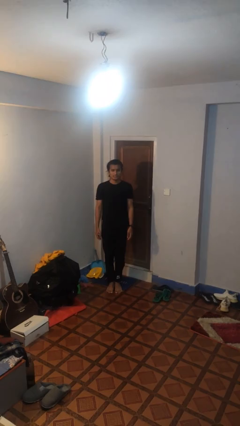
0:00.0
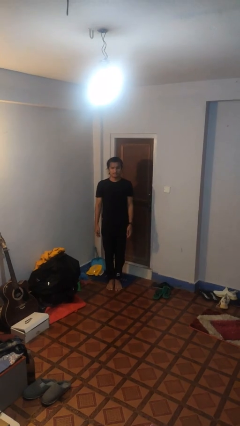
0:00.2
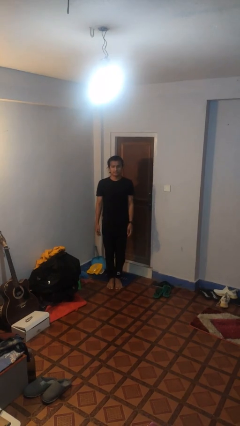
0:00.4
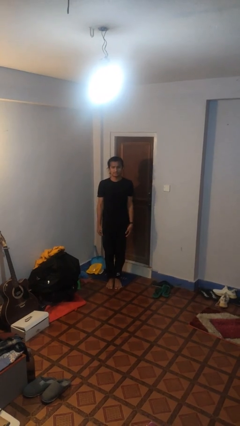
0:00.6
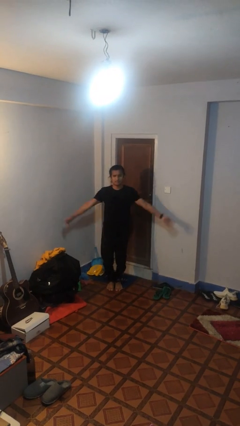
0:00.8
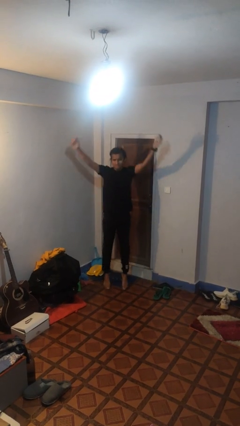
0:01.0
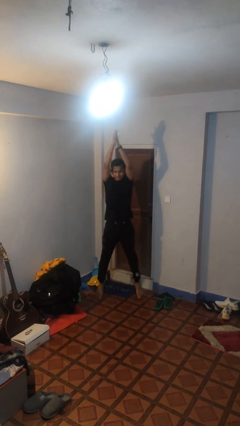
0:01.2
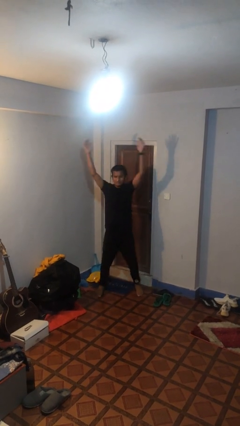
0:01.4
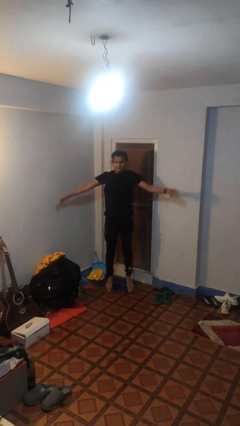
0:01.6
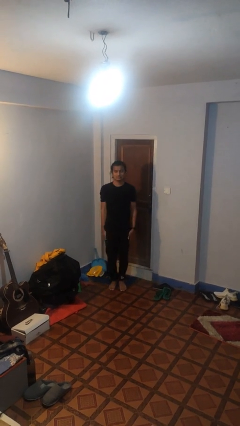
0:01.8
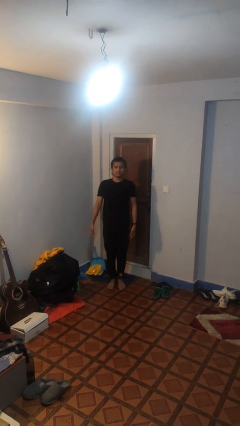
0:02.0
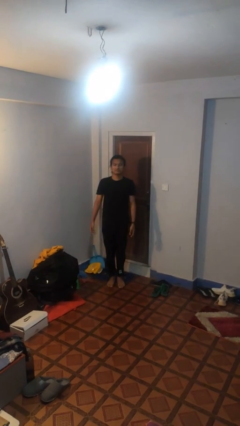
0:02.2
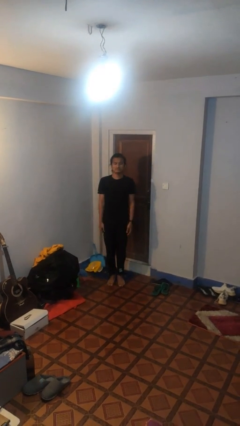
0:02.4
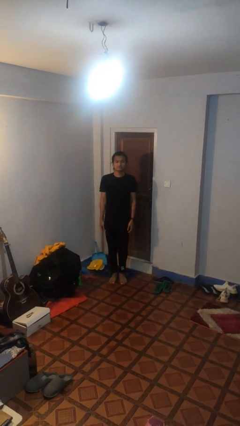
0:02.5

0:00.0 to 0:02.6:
person exercises with jumping jacks

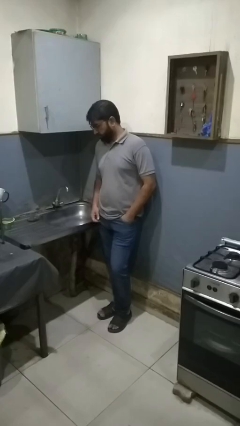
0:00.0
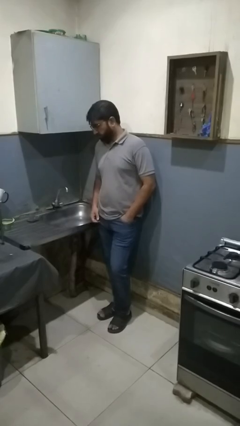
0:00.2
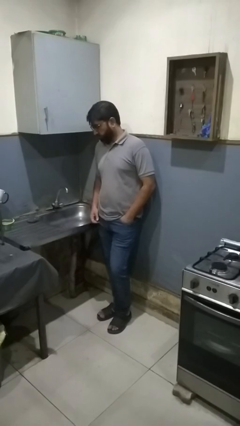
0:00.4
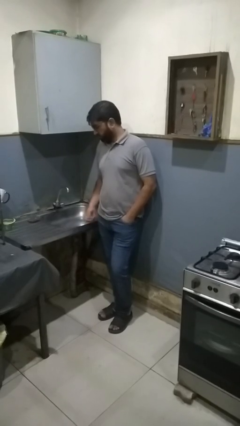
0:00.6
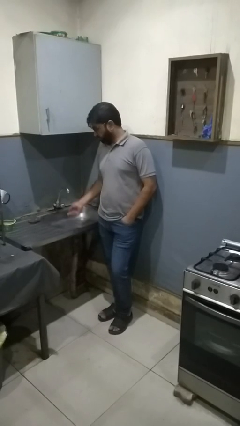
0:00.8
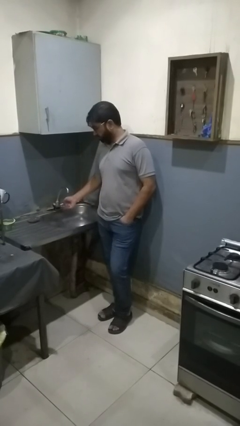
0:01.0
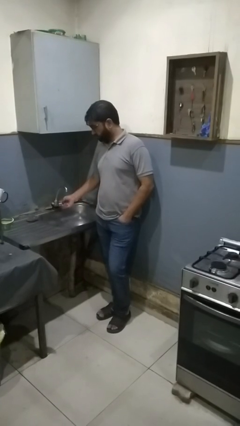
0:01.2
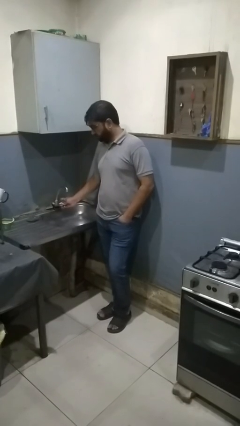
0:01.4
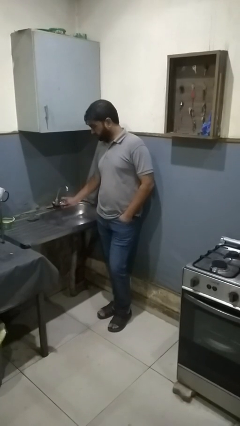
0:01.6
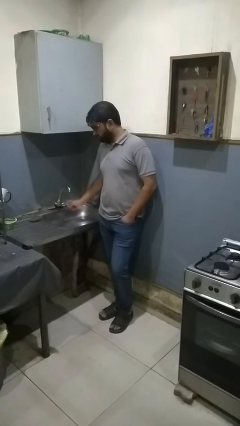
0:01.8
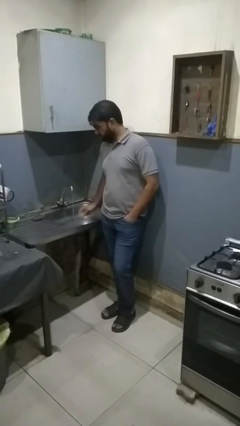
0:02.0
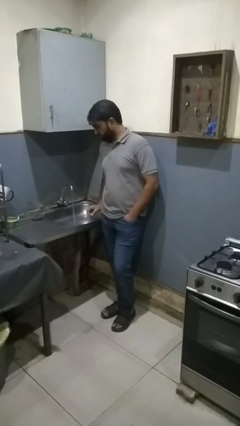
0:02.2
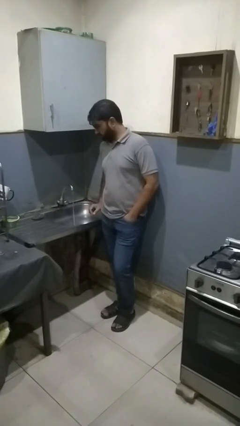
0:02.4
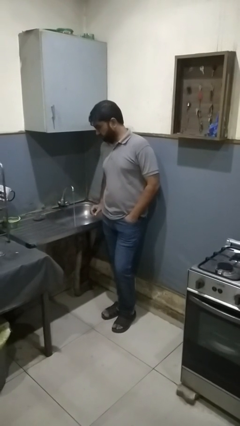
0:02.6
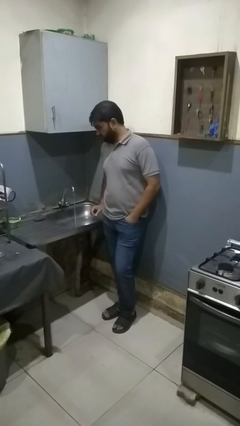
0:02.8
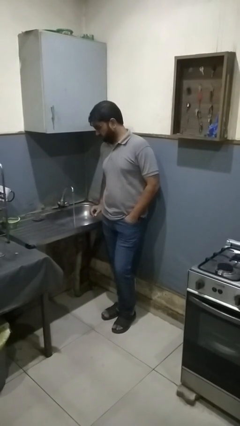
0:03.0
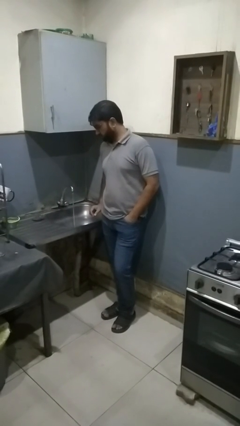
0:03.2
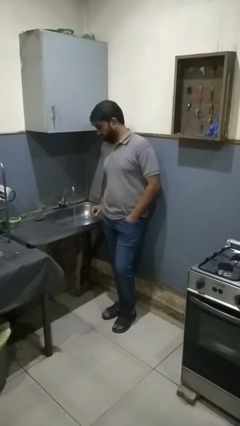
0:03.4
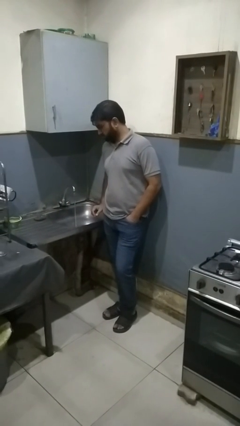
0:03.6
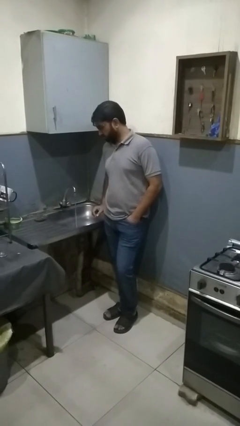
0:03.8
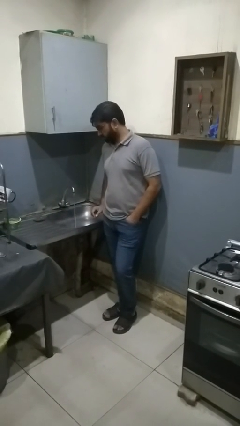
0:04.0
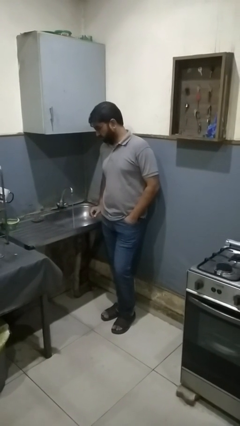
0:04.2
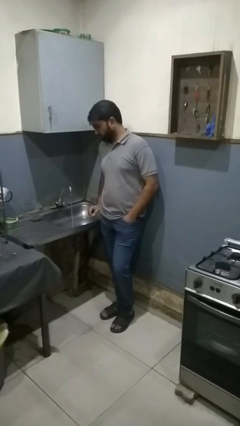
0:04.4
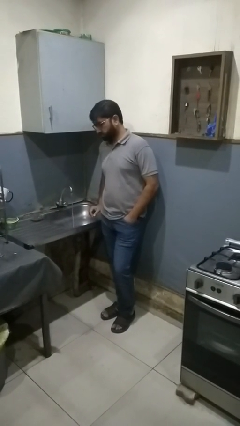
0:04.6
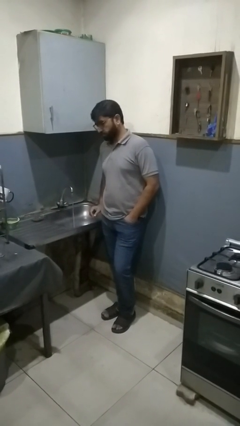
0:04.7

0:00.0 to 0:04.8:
person turns on faucet

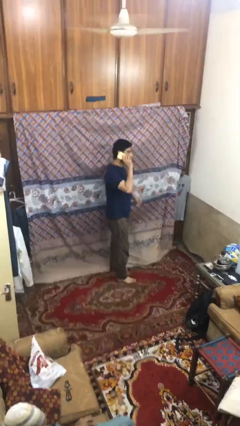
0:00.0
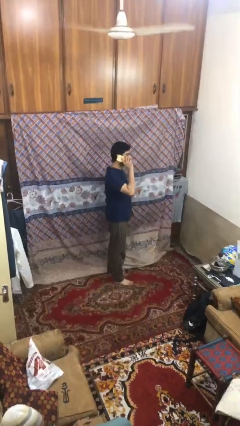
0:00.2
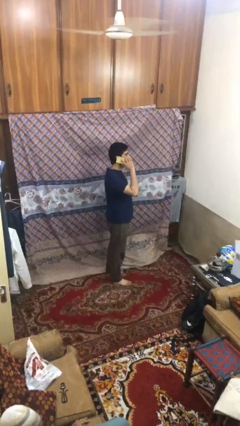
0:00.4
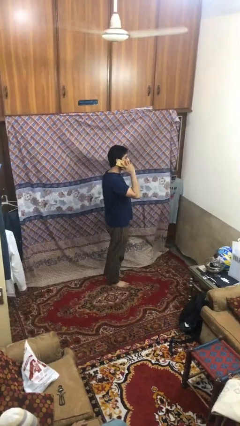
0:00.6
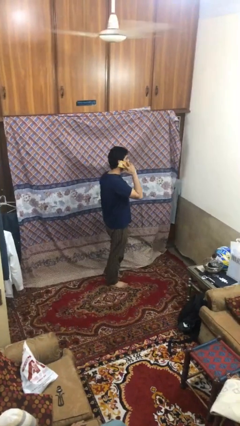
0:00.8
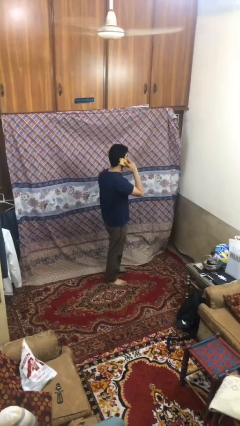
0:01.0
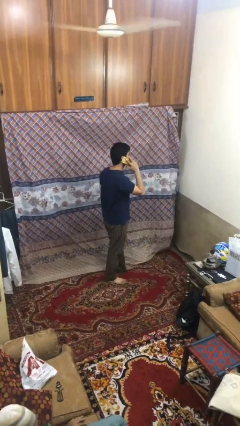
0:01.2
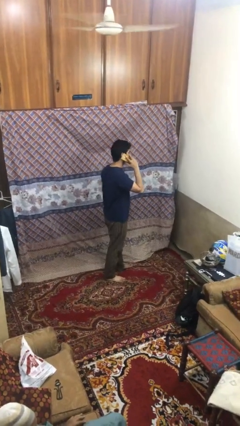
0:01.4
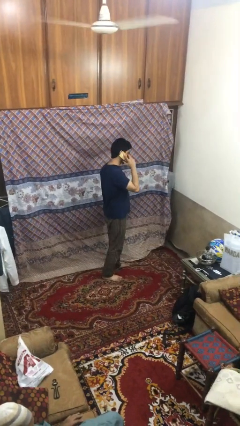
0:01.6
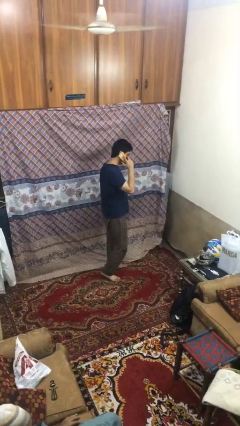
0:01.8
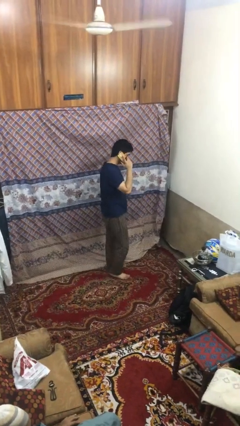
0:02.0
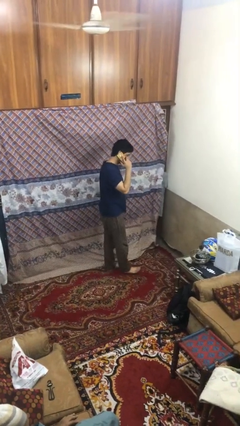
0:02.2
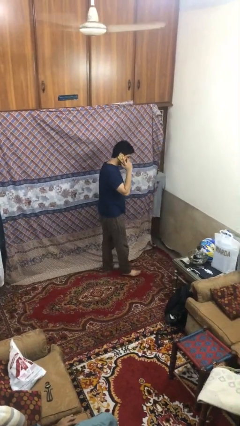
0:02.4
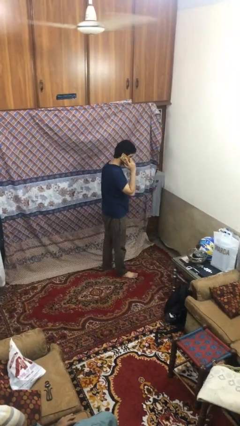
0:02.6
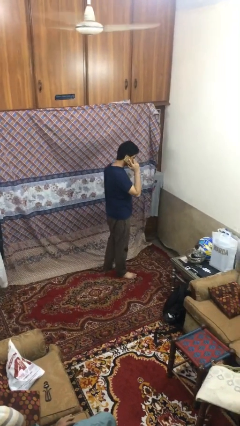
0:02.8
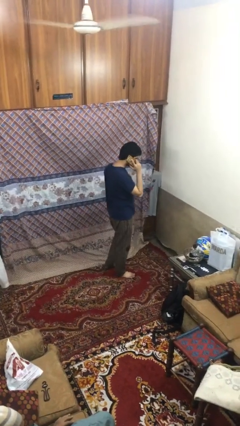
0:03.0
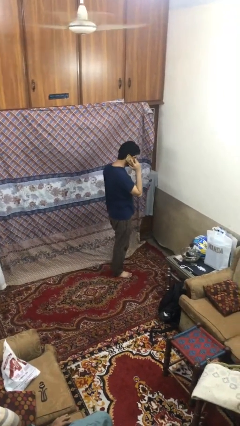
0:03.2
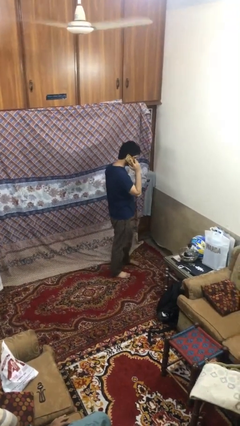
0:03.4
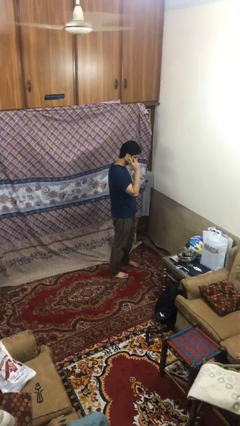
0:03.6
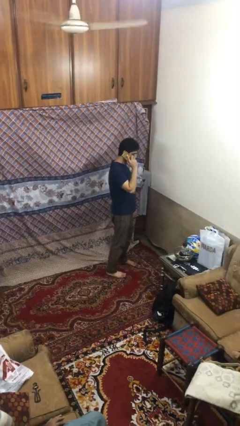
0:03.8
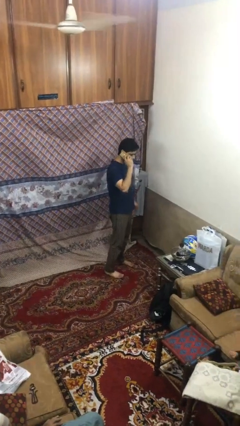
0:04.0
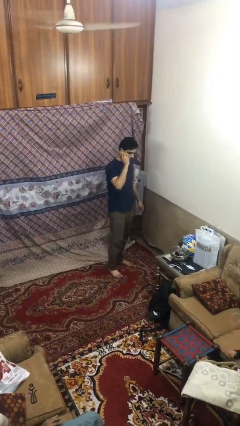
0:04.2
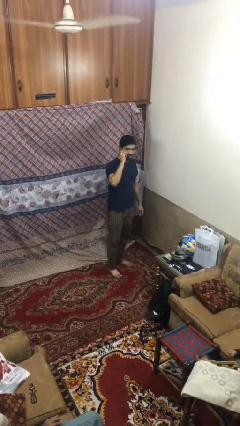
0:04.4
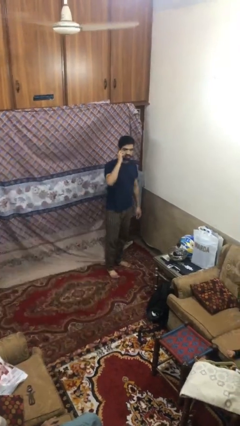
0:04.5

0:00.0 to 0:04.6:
person talks on phone

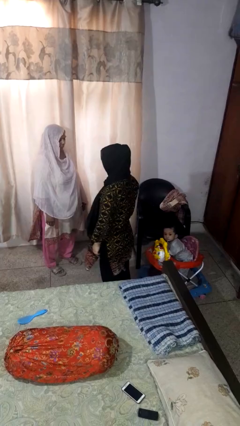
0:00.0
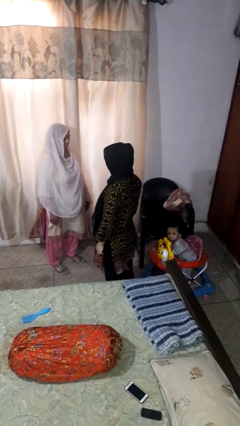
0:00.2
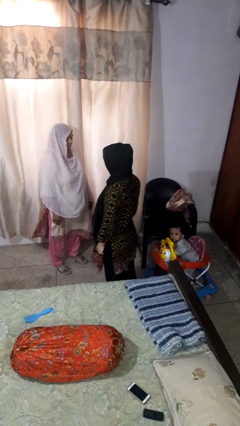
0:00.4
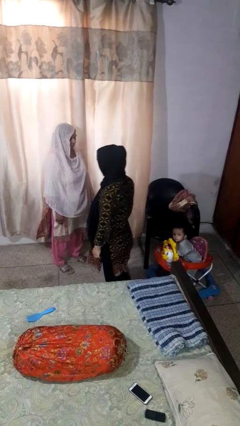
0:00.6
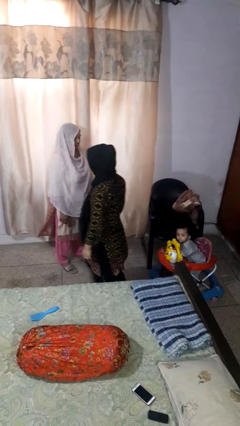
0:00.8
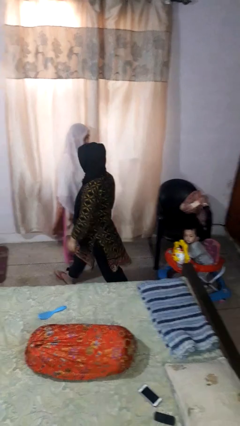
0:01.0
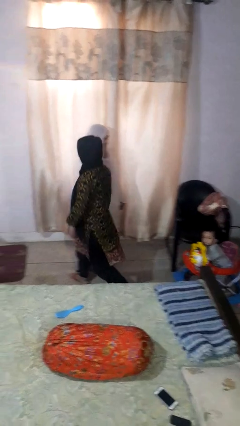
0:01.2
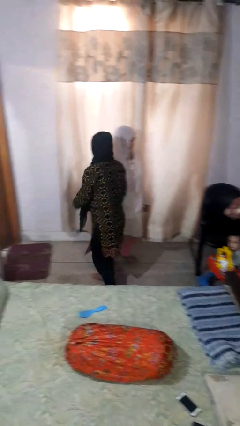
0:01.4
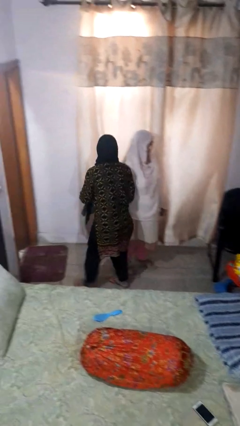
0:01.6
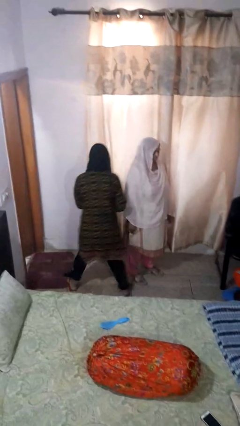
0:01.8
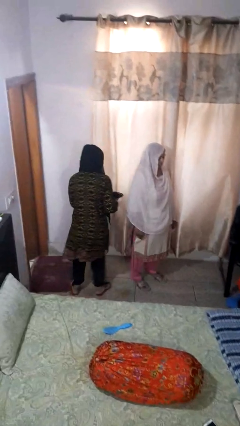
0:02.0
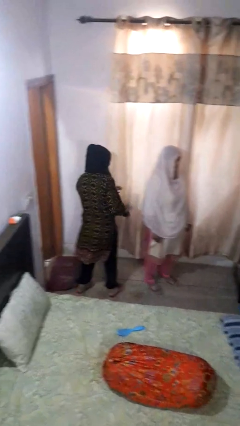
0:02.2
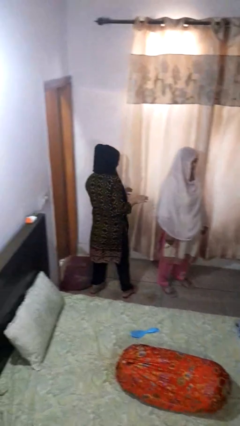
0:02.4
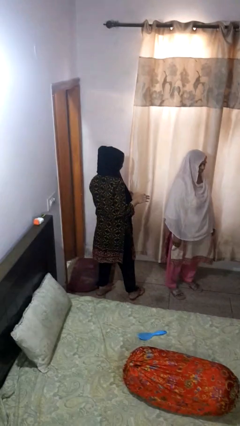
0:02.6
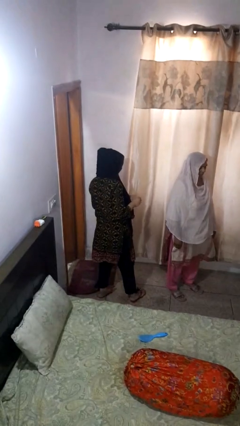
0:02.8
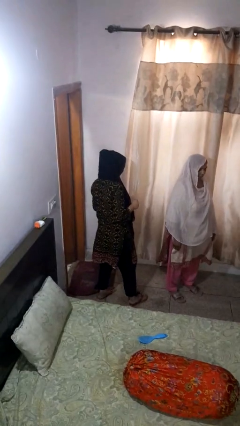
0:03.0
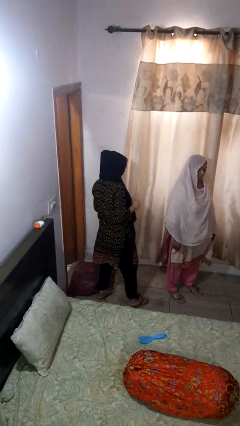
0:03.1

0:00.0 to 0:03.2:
person bumps into person

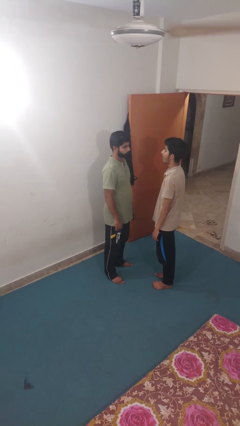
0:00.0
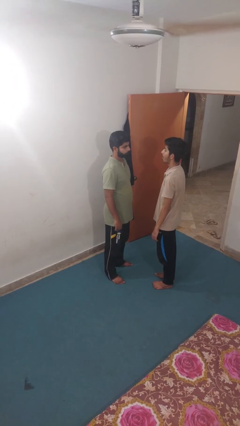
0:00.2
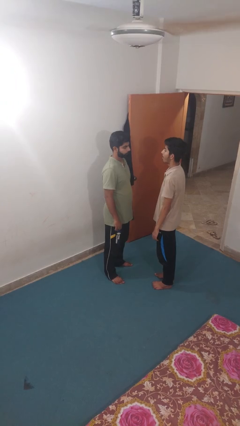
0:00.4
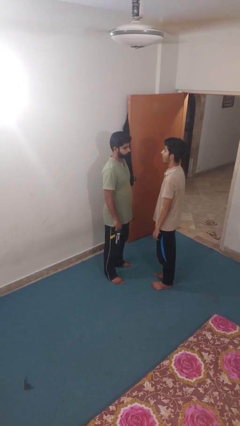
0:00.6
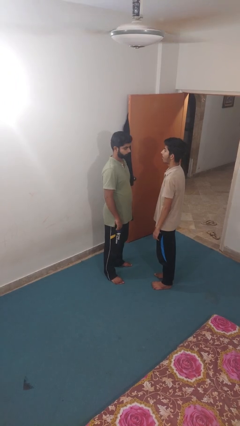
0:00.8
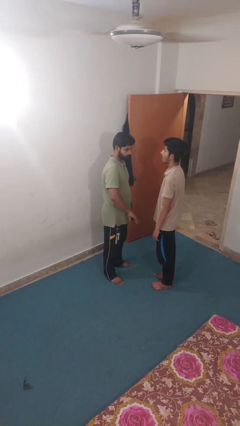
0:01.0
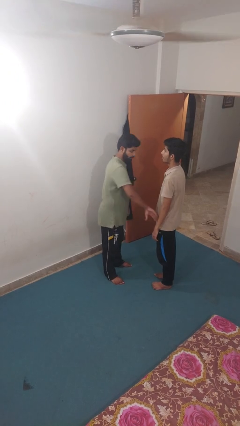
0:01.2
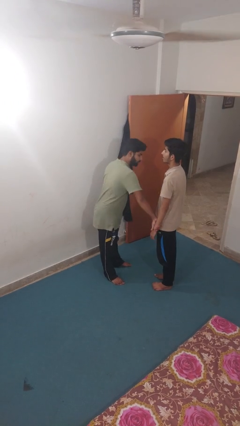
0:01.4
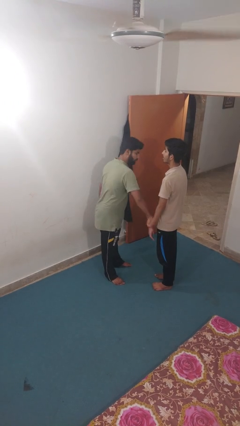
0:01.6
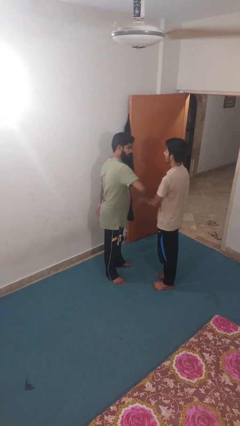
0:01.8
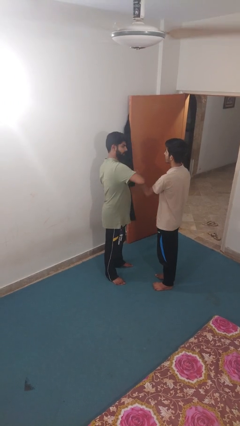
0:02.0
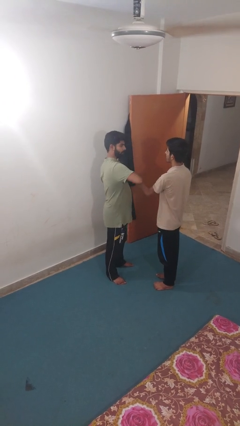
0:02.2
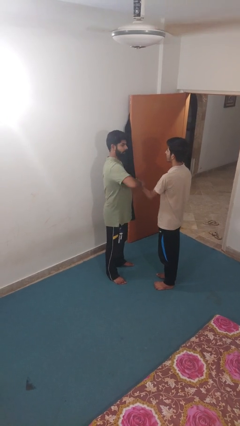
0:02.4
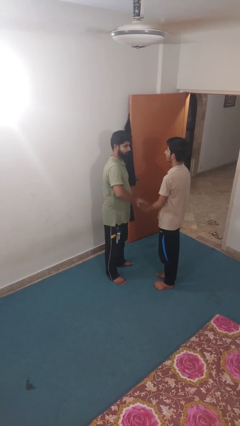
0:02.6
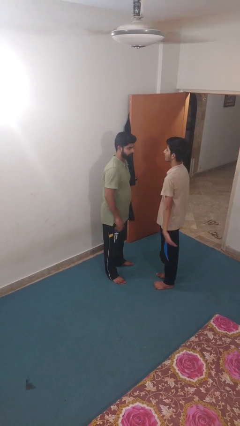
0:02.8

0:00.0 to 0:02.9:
person grabs person by forearm
